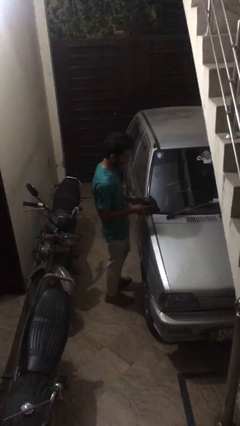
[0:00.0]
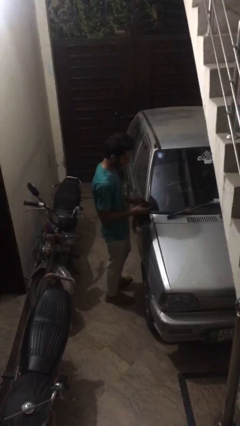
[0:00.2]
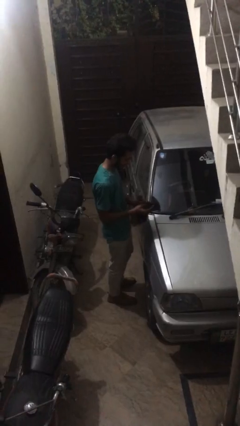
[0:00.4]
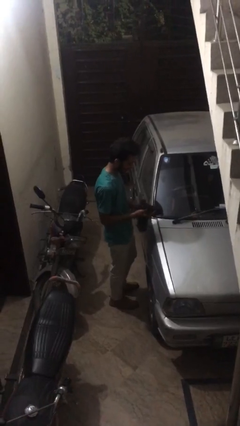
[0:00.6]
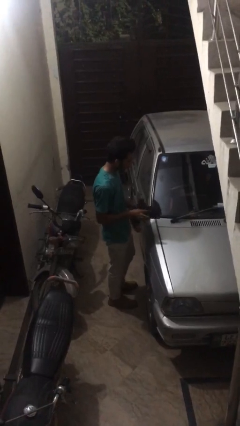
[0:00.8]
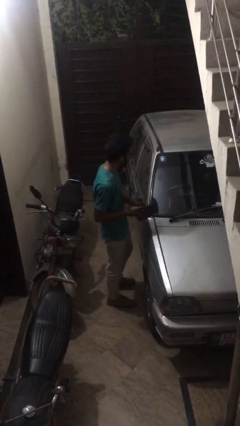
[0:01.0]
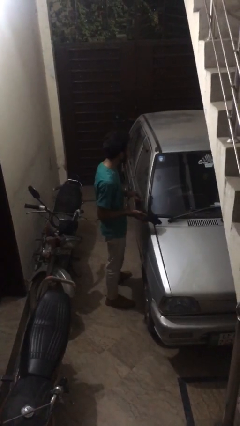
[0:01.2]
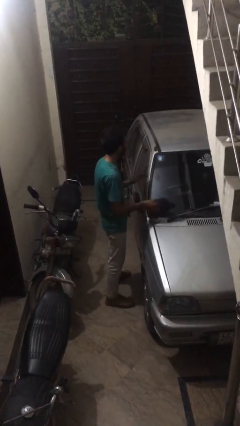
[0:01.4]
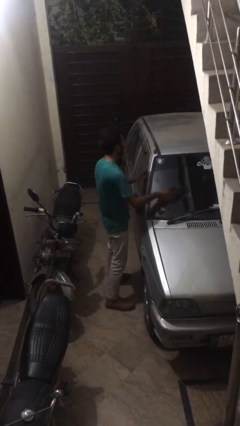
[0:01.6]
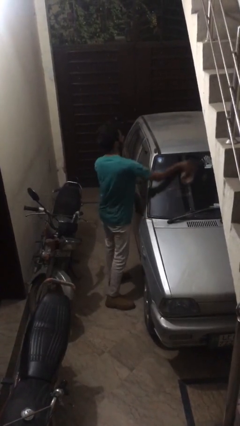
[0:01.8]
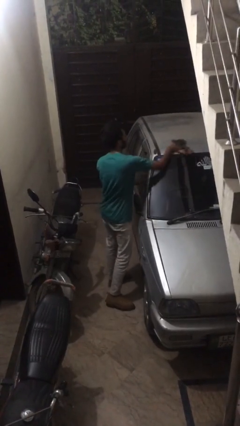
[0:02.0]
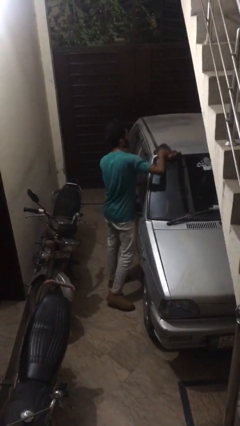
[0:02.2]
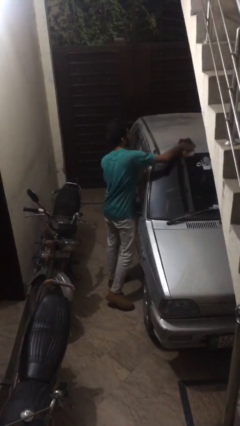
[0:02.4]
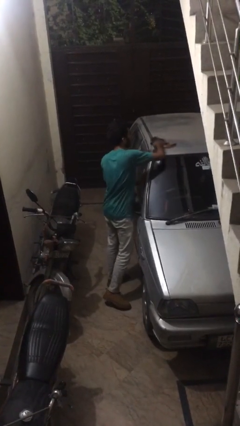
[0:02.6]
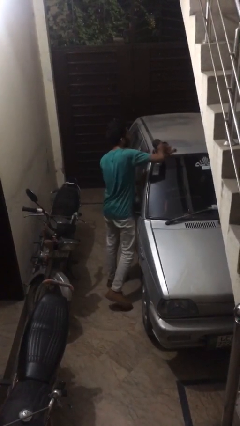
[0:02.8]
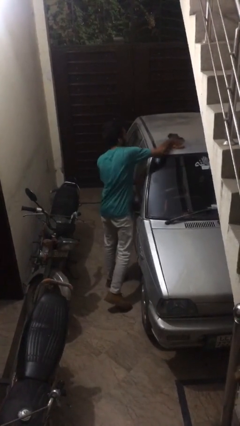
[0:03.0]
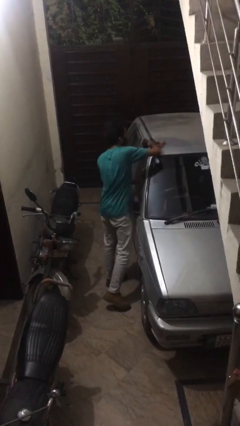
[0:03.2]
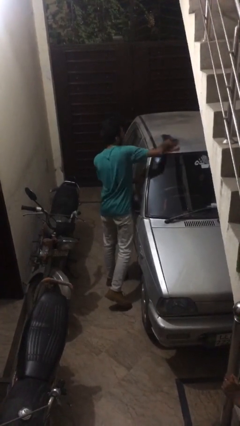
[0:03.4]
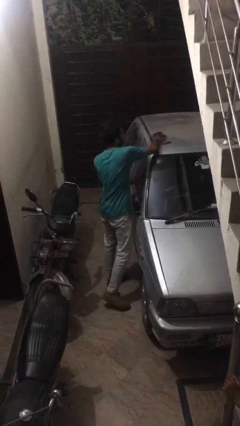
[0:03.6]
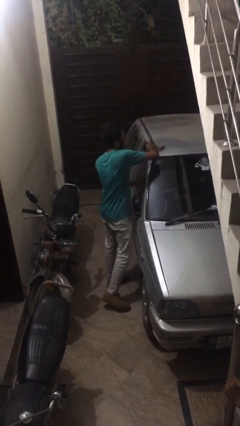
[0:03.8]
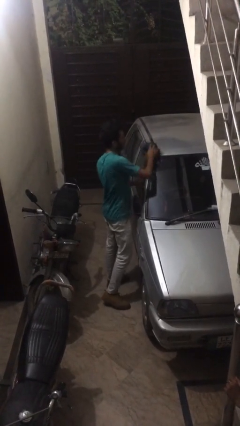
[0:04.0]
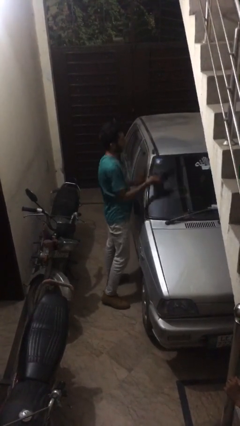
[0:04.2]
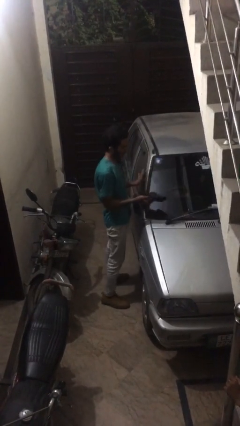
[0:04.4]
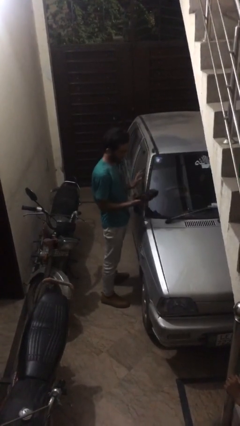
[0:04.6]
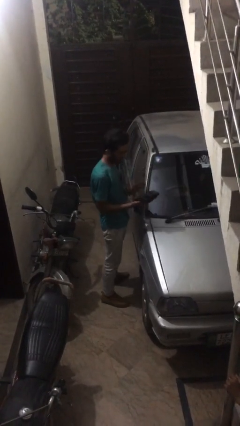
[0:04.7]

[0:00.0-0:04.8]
person polishes car with rag

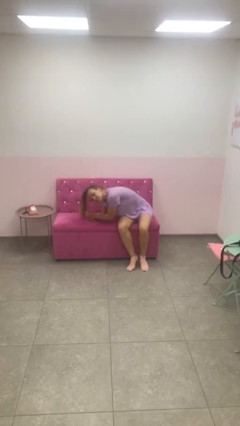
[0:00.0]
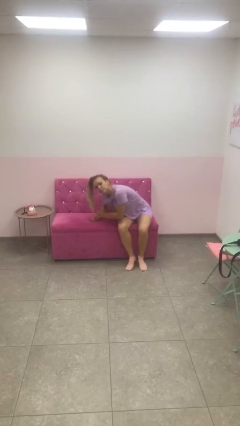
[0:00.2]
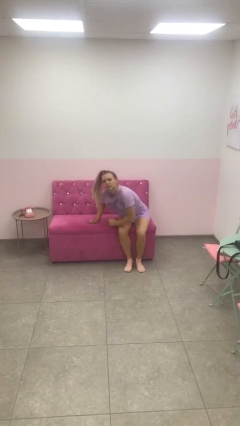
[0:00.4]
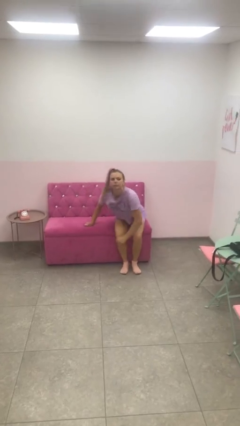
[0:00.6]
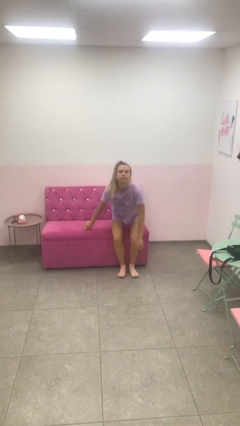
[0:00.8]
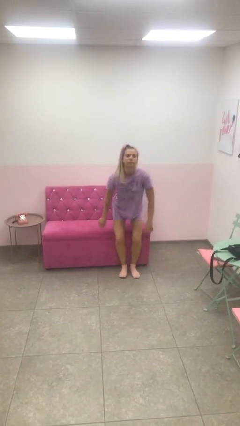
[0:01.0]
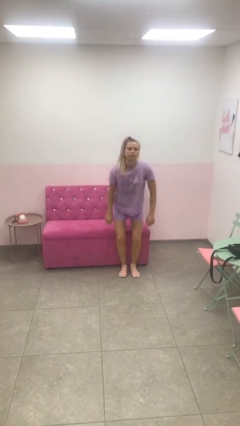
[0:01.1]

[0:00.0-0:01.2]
person stands up

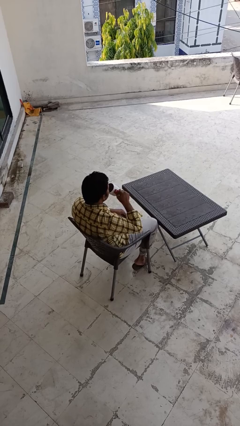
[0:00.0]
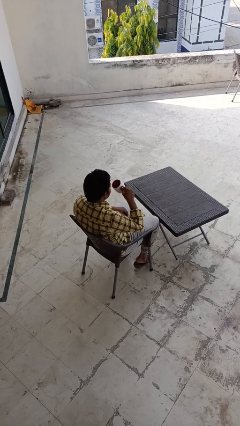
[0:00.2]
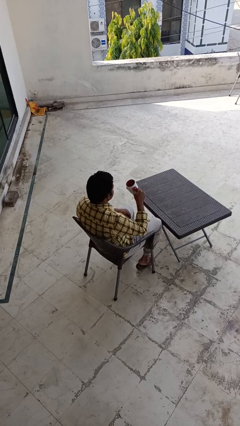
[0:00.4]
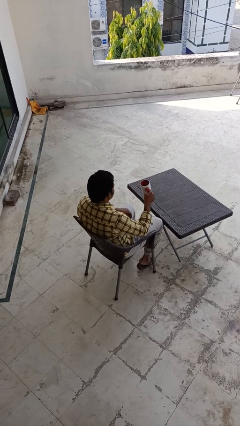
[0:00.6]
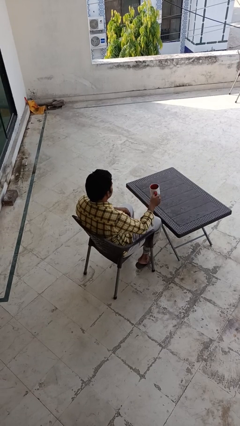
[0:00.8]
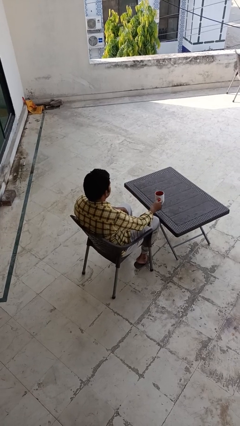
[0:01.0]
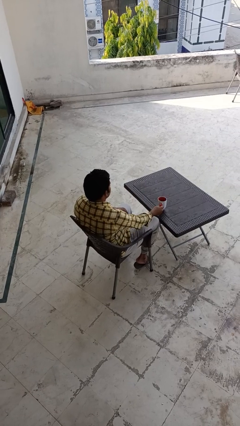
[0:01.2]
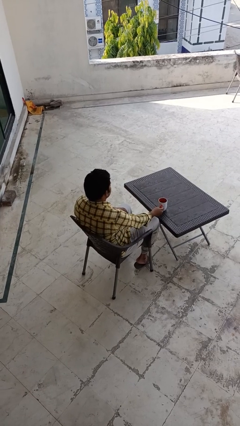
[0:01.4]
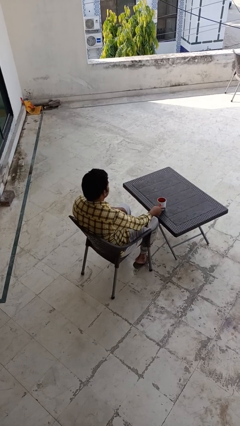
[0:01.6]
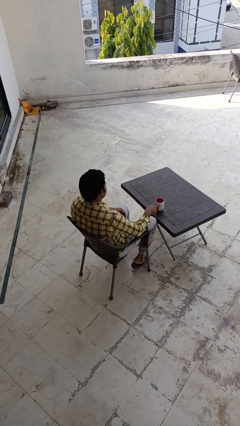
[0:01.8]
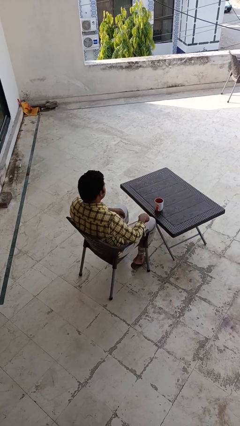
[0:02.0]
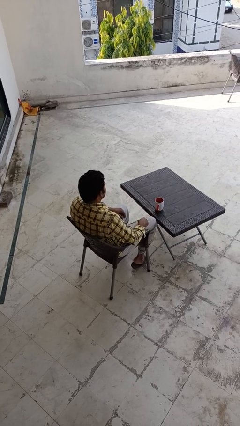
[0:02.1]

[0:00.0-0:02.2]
person puts down object on table

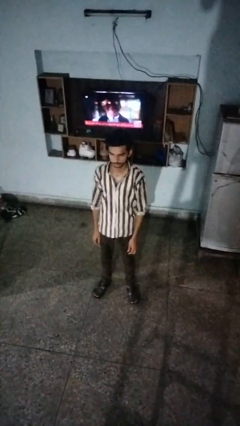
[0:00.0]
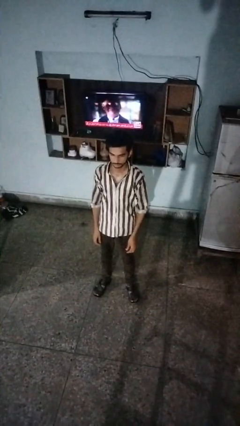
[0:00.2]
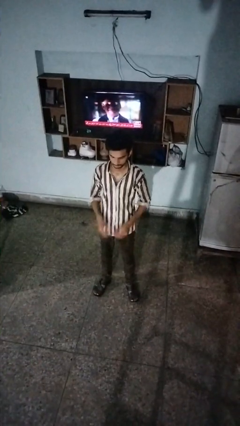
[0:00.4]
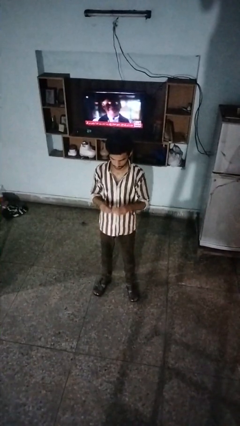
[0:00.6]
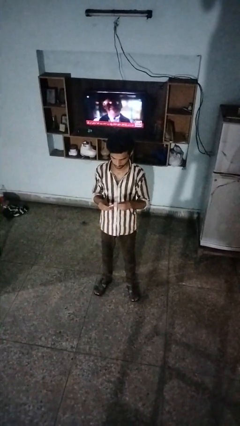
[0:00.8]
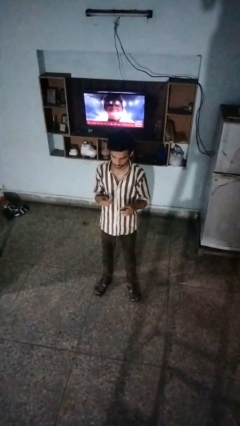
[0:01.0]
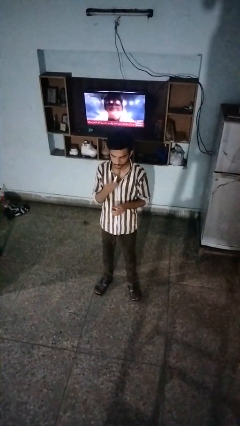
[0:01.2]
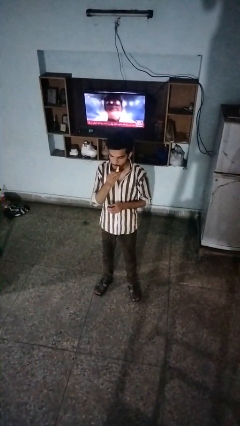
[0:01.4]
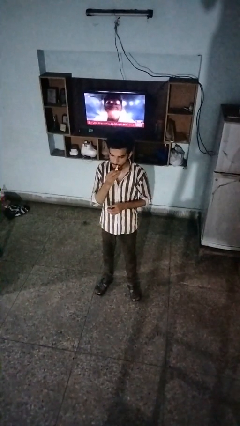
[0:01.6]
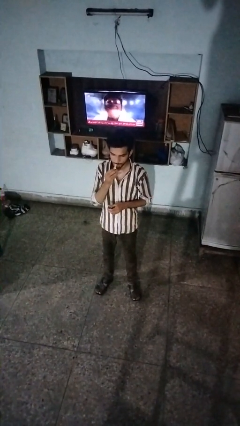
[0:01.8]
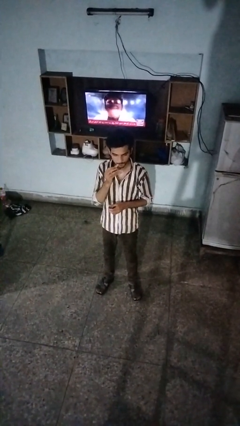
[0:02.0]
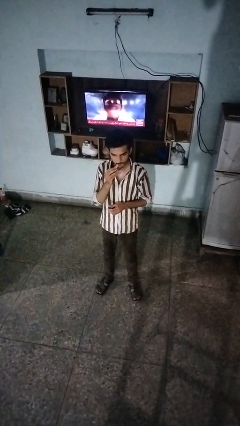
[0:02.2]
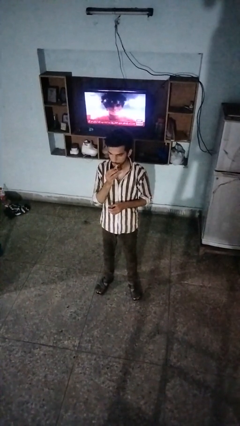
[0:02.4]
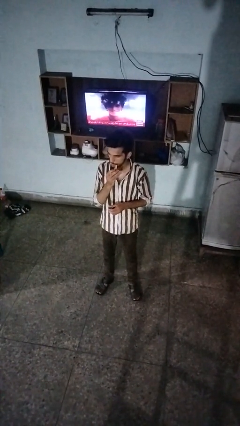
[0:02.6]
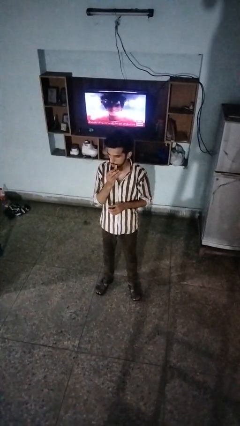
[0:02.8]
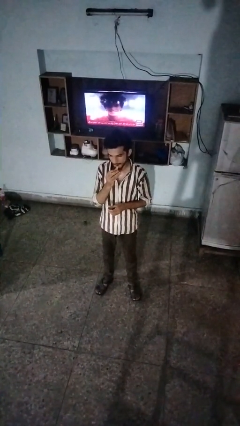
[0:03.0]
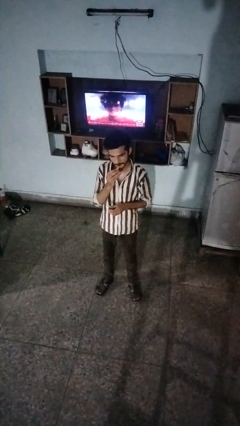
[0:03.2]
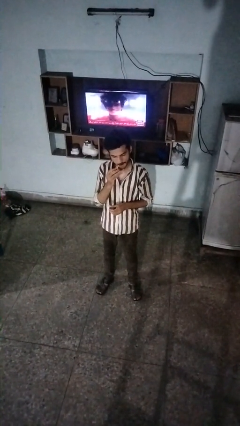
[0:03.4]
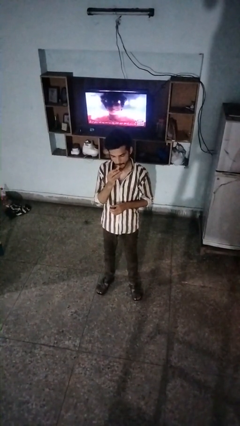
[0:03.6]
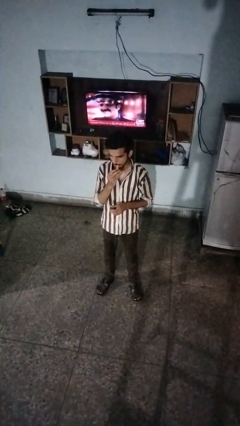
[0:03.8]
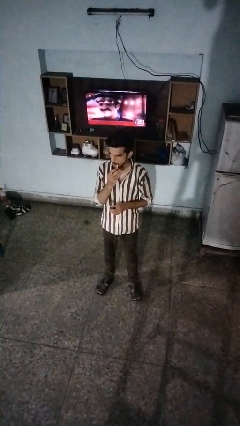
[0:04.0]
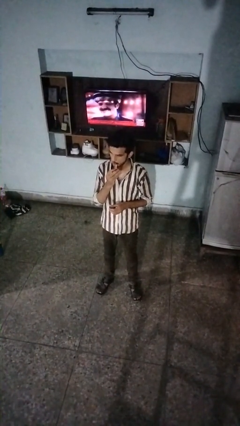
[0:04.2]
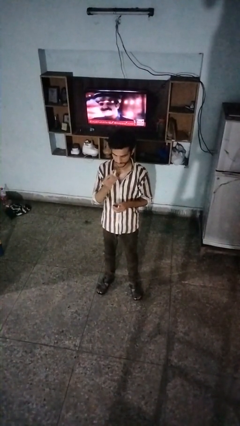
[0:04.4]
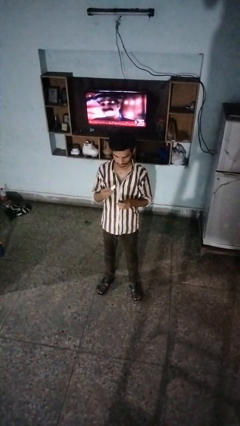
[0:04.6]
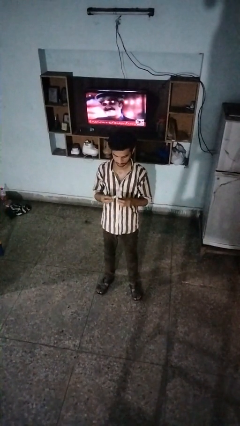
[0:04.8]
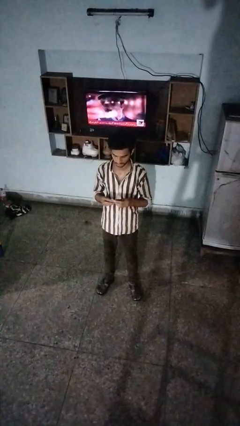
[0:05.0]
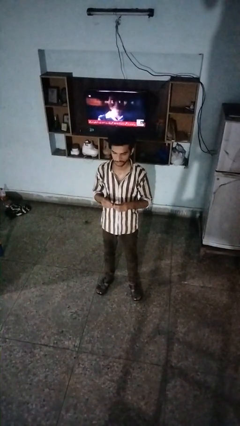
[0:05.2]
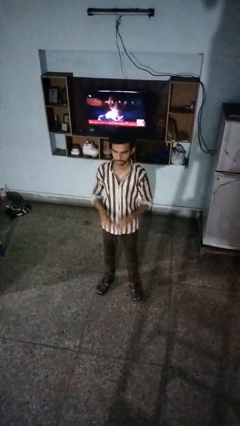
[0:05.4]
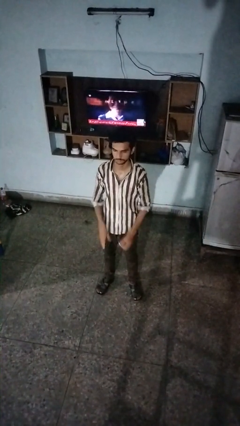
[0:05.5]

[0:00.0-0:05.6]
person applies lip makeup

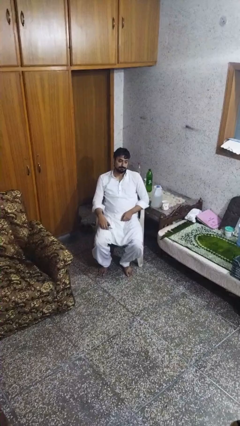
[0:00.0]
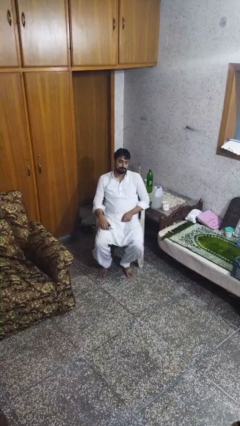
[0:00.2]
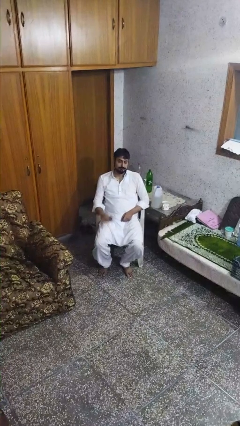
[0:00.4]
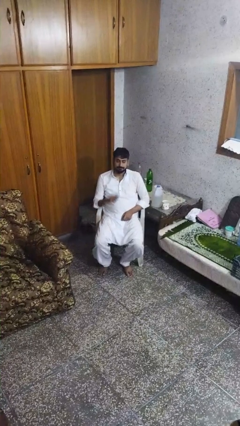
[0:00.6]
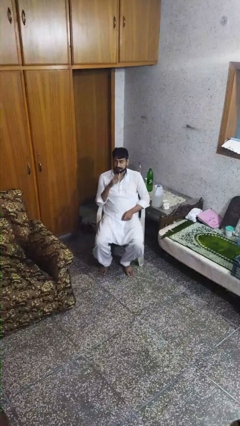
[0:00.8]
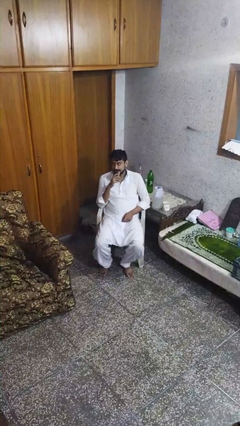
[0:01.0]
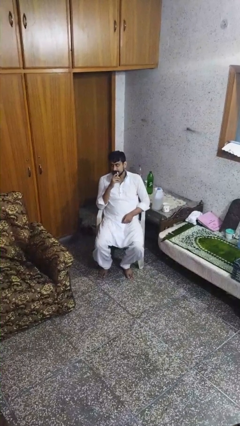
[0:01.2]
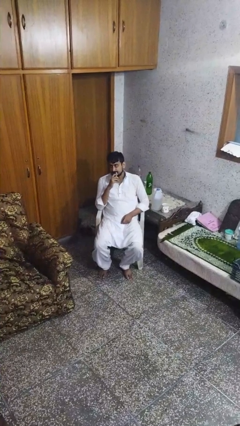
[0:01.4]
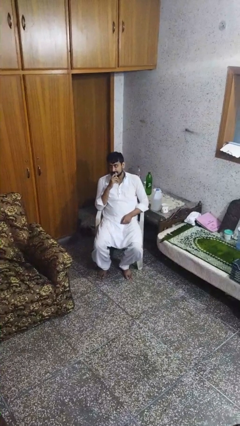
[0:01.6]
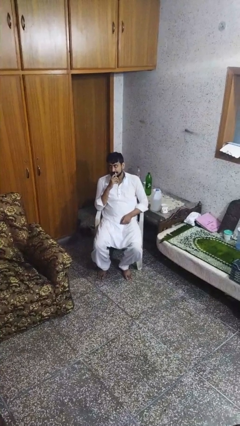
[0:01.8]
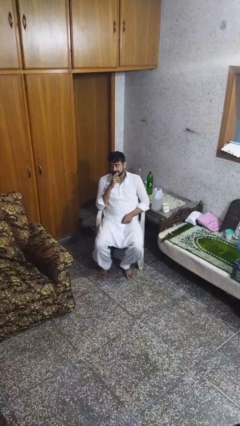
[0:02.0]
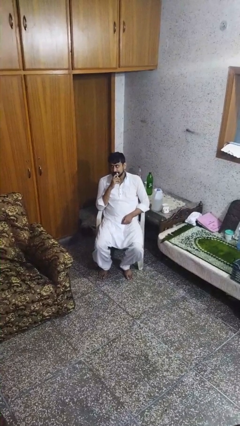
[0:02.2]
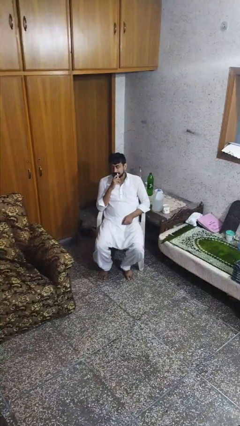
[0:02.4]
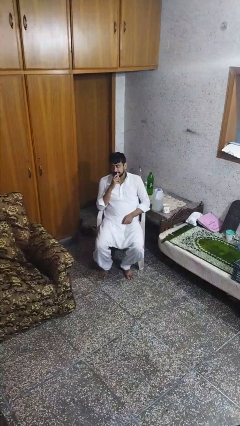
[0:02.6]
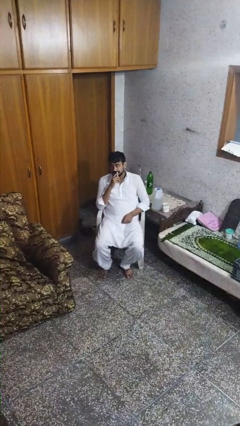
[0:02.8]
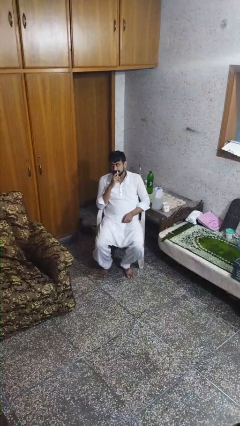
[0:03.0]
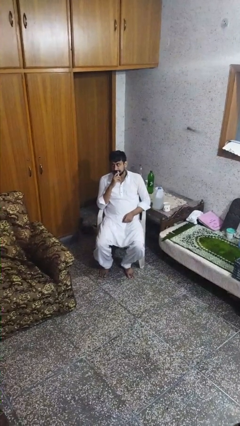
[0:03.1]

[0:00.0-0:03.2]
person vapes

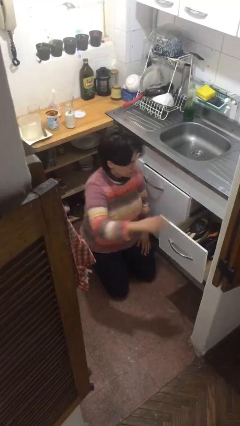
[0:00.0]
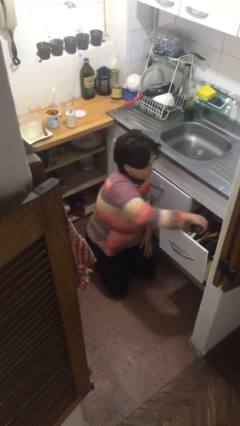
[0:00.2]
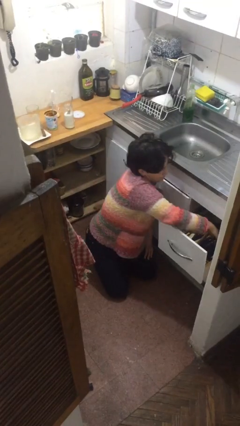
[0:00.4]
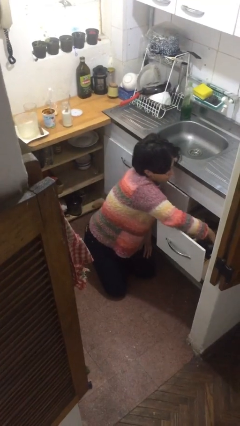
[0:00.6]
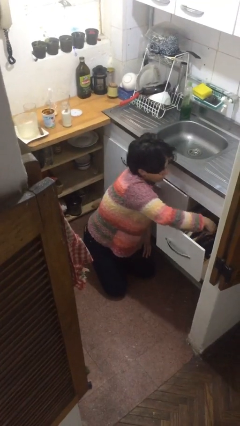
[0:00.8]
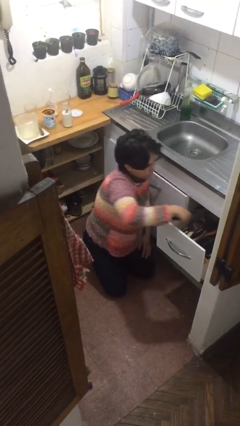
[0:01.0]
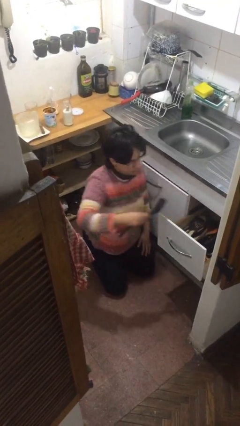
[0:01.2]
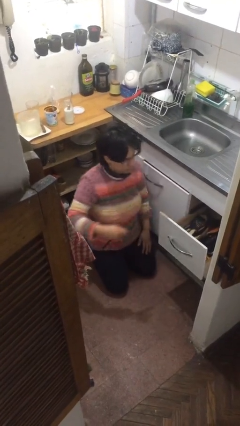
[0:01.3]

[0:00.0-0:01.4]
person takes object from kitchen drawer
